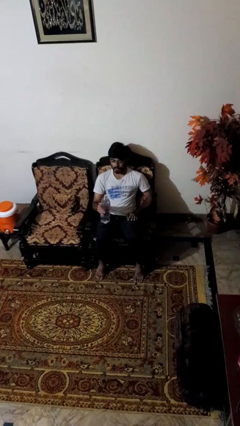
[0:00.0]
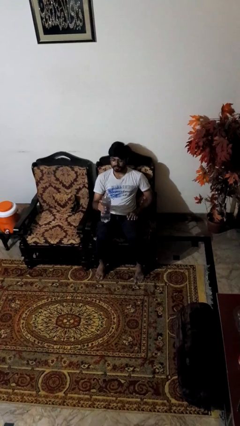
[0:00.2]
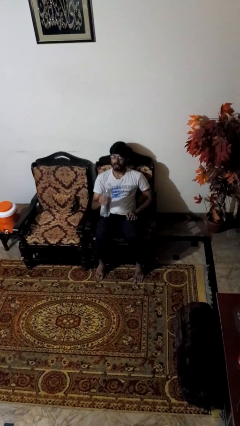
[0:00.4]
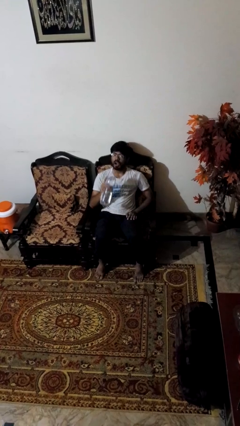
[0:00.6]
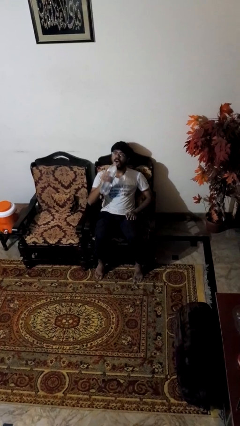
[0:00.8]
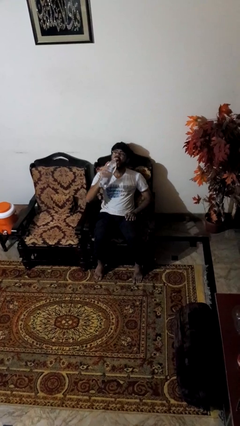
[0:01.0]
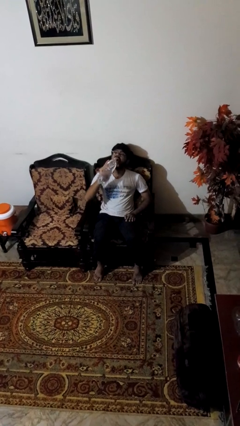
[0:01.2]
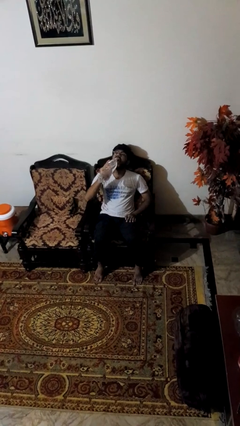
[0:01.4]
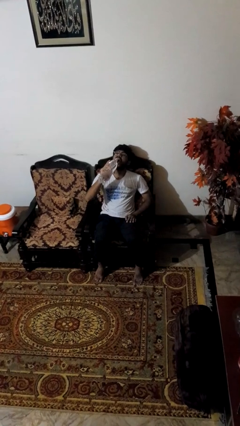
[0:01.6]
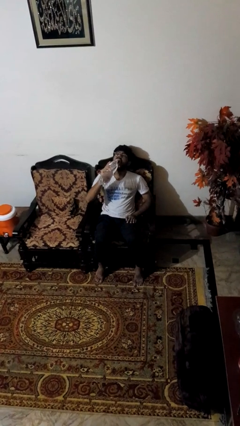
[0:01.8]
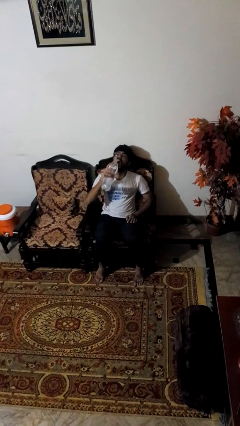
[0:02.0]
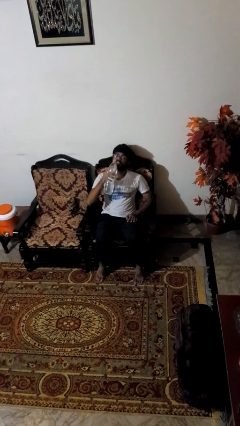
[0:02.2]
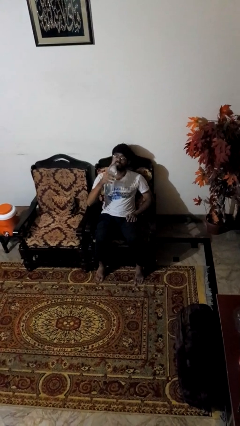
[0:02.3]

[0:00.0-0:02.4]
person drinks from bottle

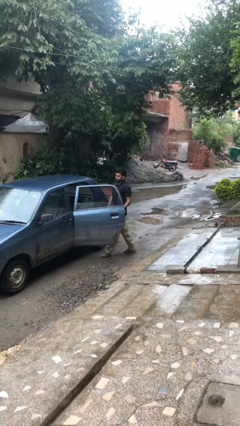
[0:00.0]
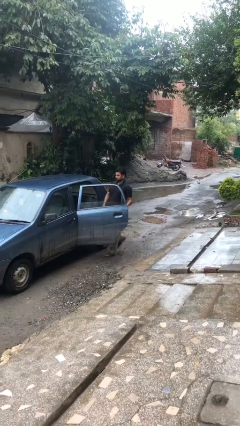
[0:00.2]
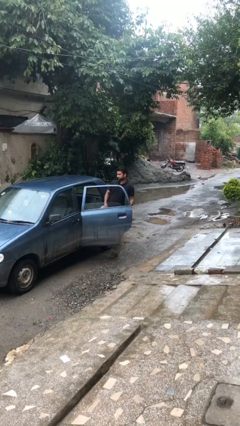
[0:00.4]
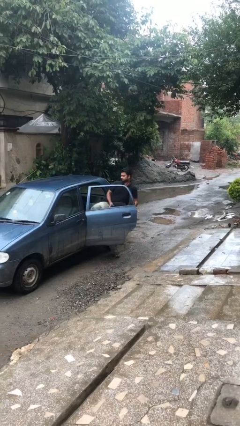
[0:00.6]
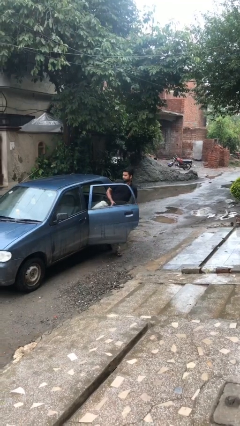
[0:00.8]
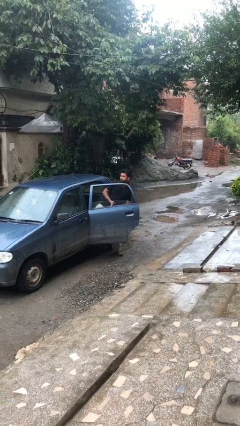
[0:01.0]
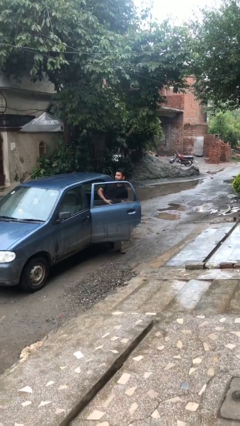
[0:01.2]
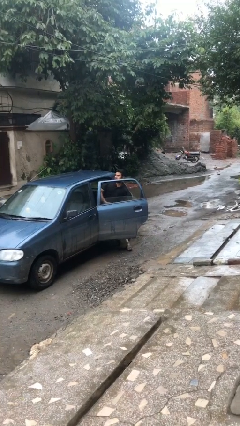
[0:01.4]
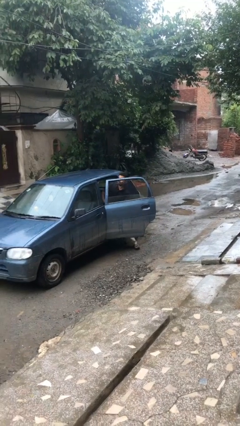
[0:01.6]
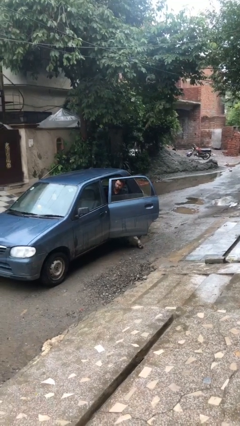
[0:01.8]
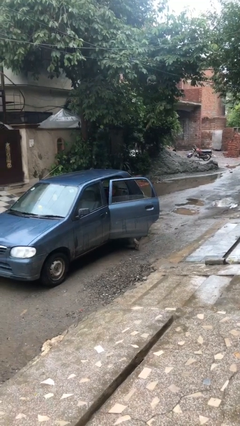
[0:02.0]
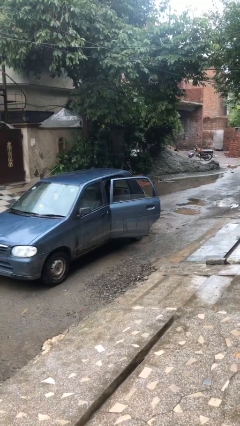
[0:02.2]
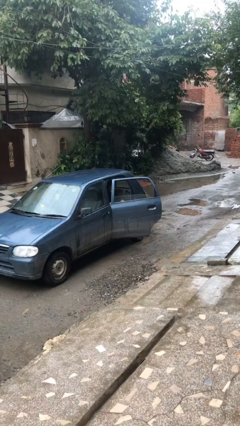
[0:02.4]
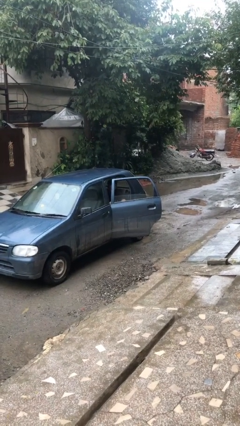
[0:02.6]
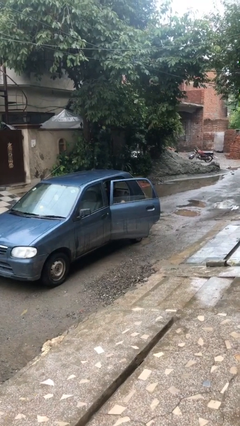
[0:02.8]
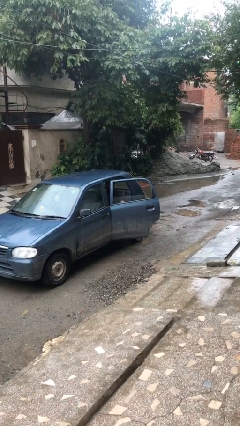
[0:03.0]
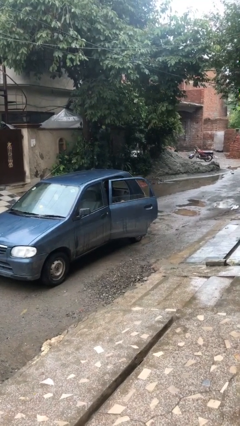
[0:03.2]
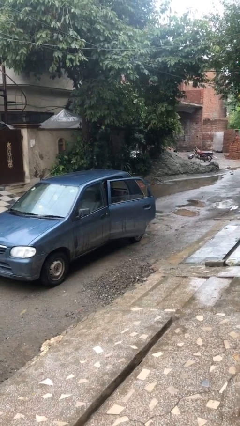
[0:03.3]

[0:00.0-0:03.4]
person enters car

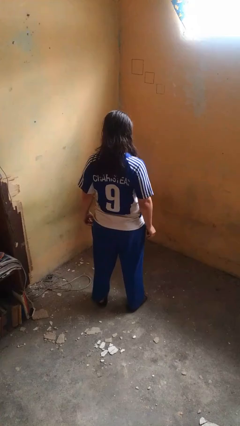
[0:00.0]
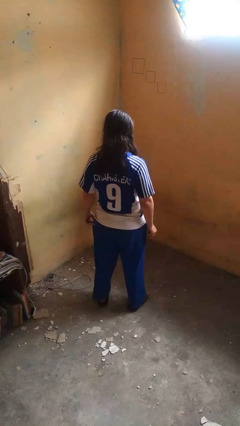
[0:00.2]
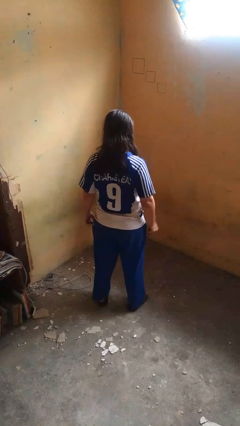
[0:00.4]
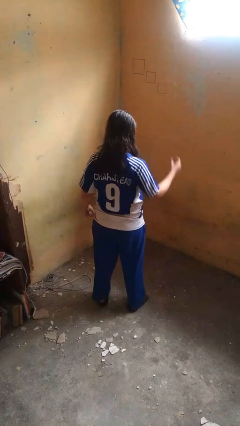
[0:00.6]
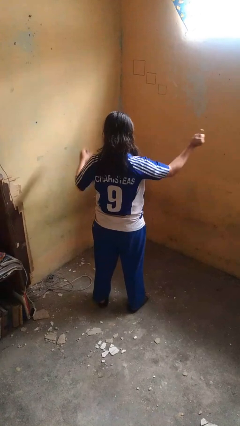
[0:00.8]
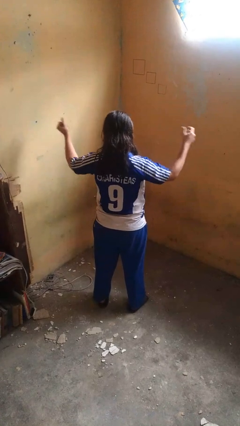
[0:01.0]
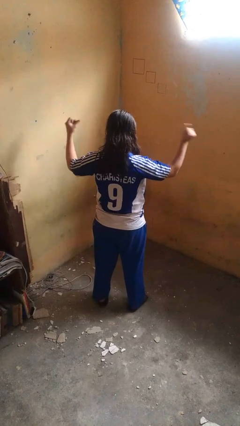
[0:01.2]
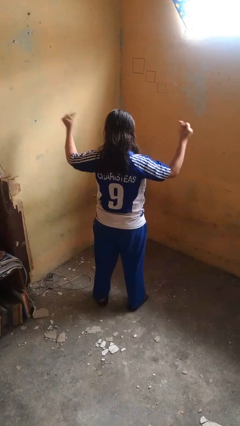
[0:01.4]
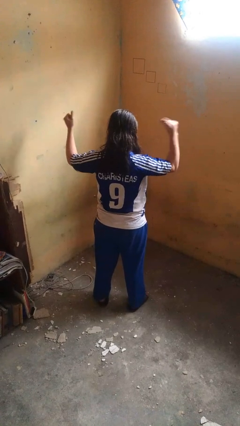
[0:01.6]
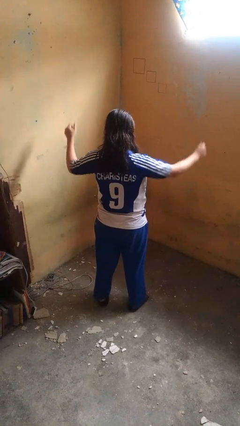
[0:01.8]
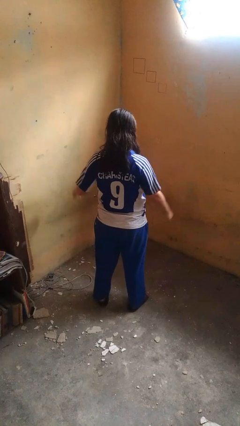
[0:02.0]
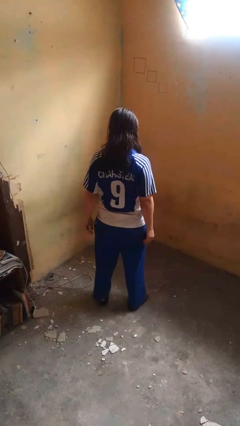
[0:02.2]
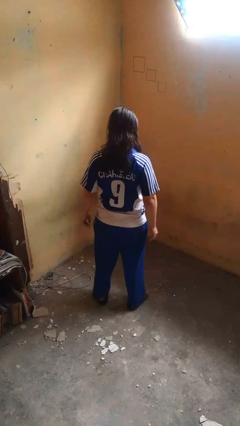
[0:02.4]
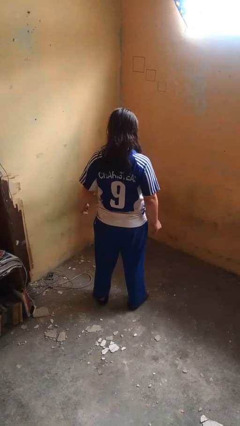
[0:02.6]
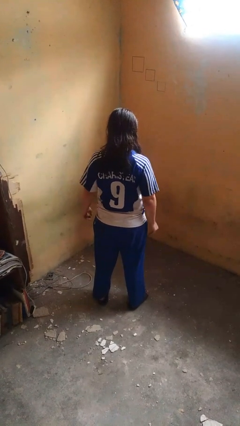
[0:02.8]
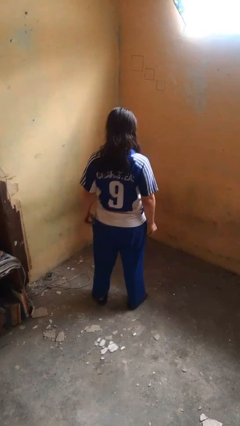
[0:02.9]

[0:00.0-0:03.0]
person snaps fingers

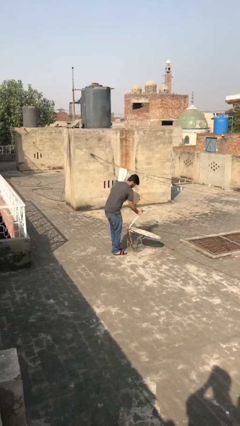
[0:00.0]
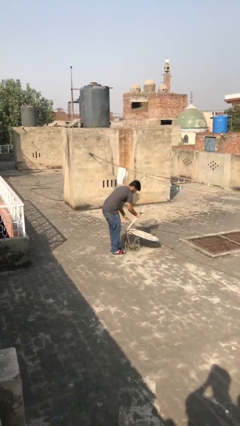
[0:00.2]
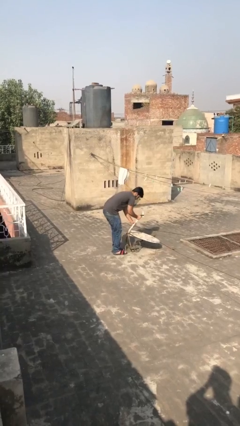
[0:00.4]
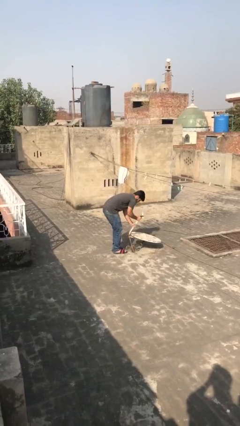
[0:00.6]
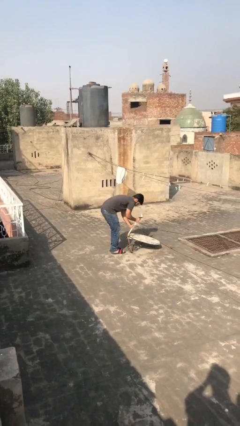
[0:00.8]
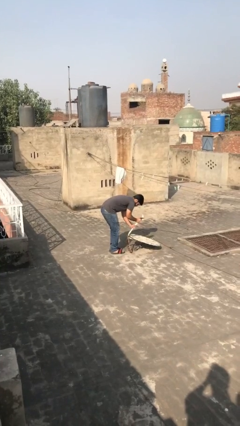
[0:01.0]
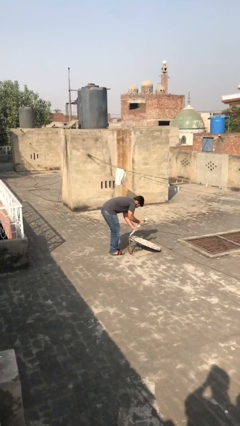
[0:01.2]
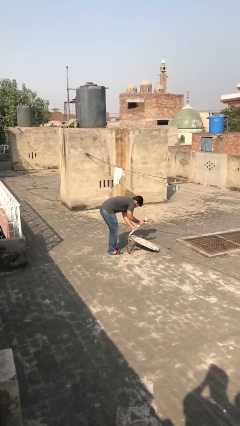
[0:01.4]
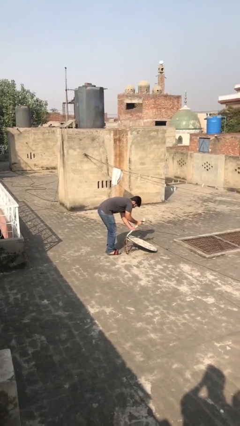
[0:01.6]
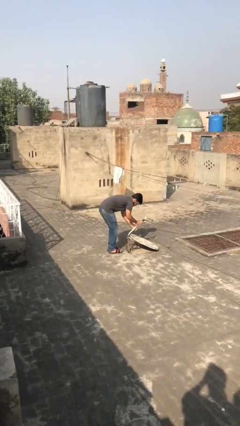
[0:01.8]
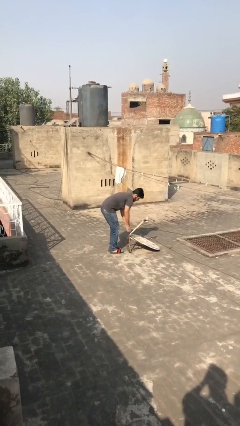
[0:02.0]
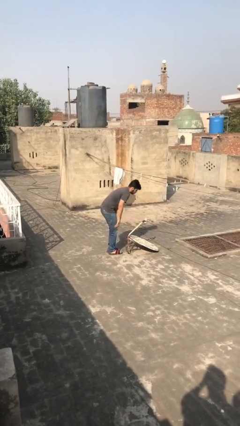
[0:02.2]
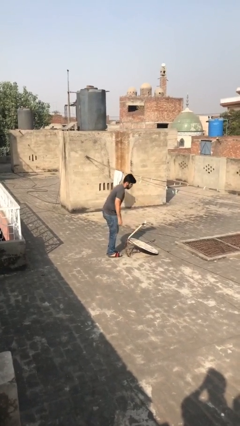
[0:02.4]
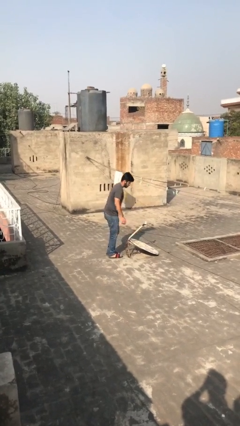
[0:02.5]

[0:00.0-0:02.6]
person puts down object on floor

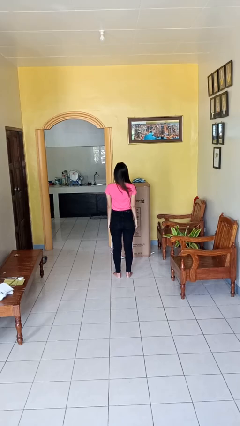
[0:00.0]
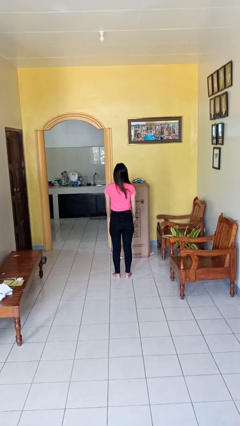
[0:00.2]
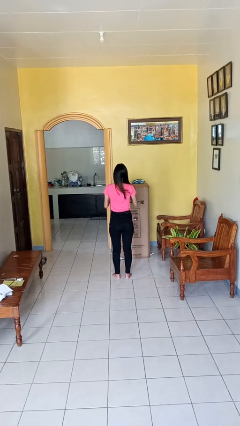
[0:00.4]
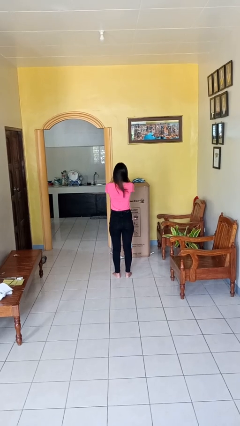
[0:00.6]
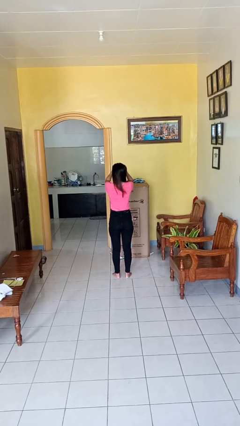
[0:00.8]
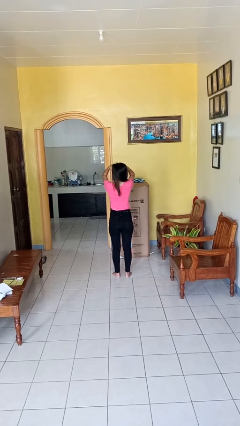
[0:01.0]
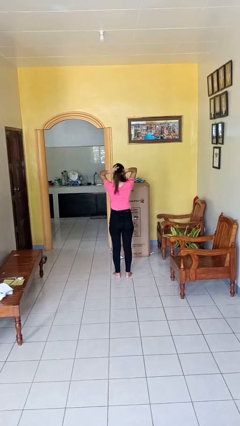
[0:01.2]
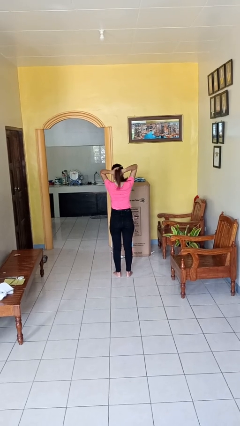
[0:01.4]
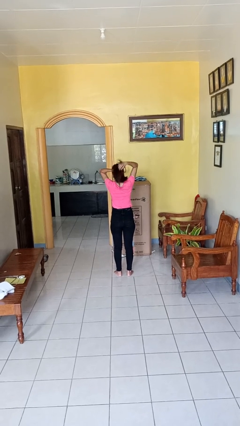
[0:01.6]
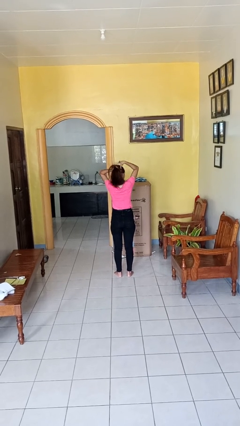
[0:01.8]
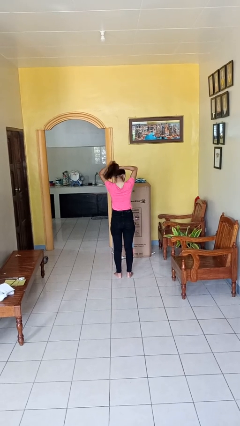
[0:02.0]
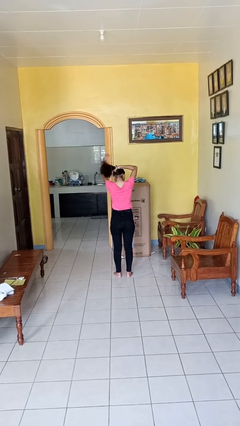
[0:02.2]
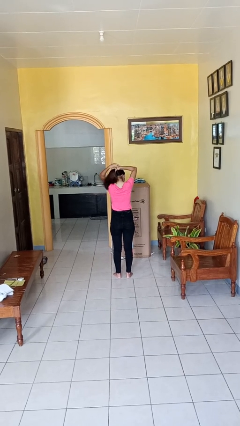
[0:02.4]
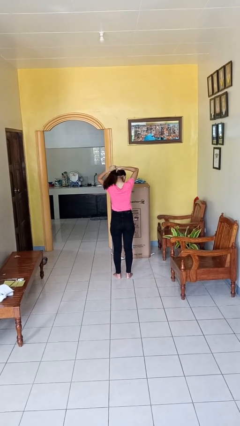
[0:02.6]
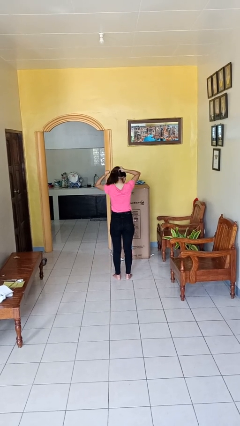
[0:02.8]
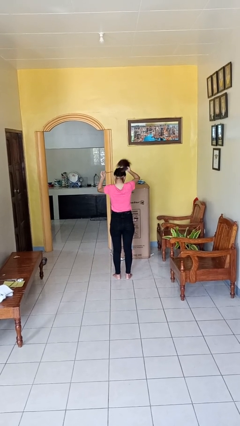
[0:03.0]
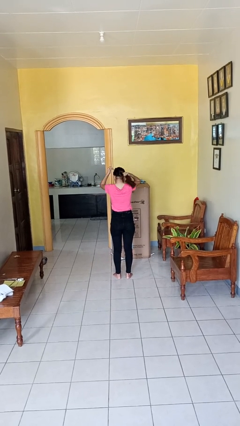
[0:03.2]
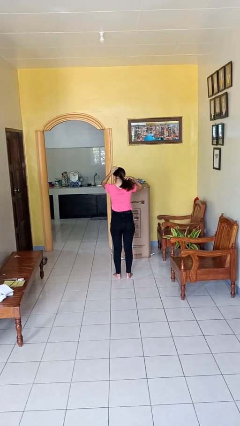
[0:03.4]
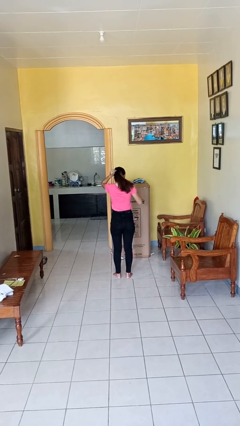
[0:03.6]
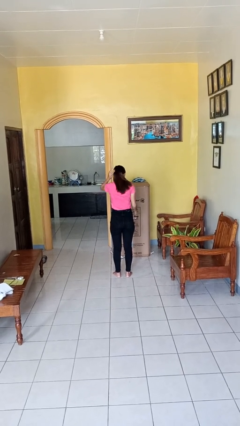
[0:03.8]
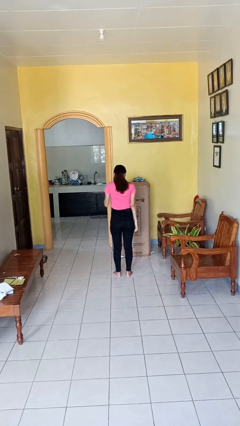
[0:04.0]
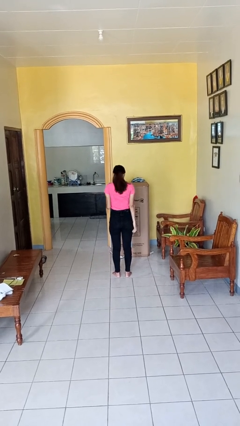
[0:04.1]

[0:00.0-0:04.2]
person puts hair in ponytail

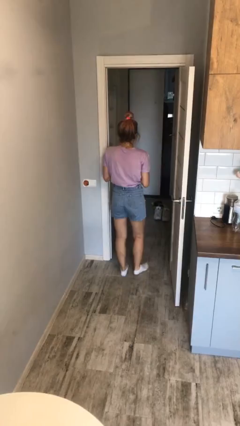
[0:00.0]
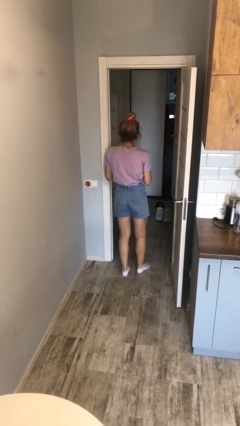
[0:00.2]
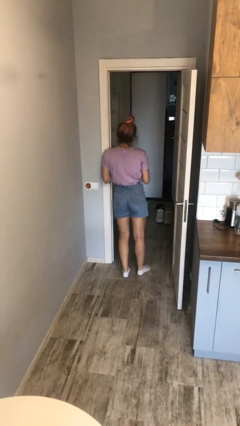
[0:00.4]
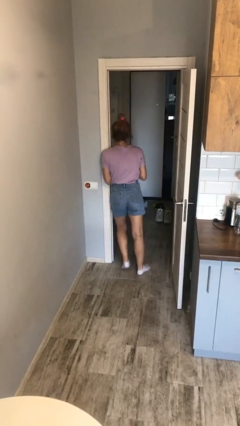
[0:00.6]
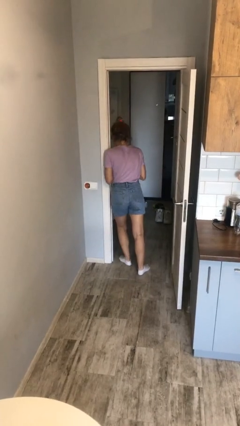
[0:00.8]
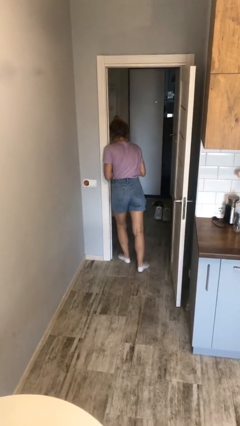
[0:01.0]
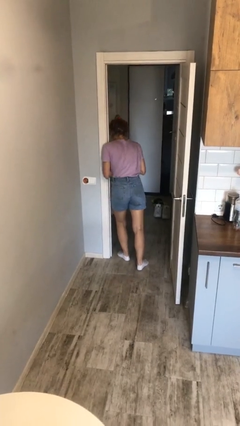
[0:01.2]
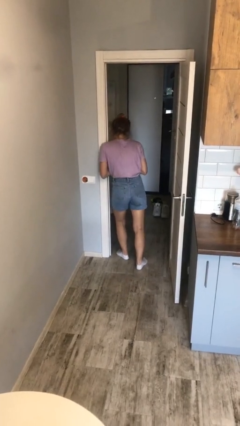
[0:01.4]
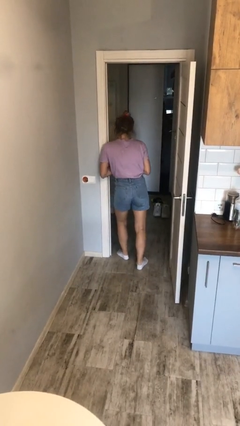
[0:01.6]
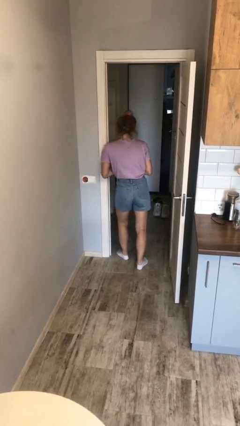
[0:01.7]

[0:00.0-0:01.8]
person bumps into wall

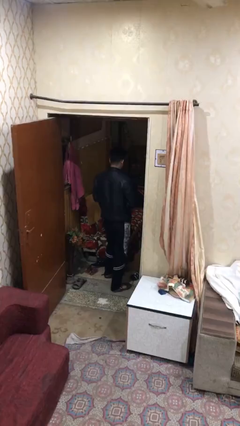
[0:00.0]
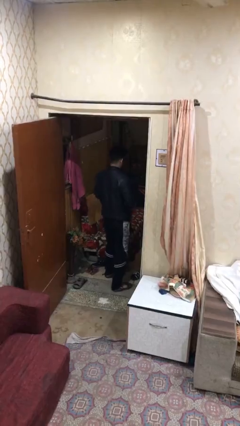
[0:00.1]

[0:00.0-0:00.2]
person enters scene through structure
